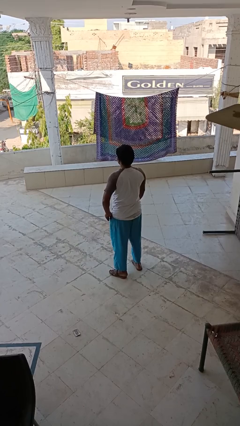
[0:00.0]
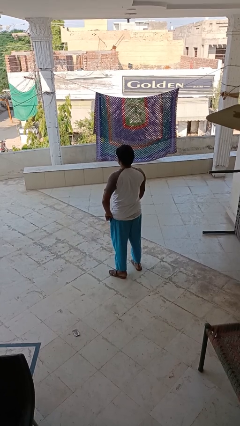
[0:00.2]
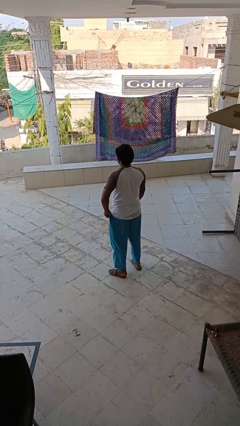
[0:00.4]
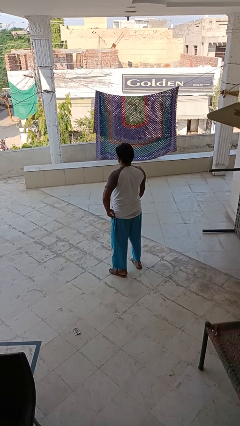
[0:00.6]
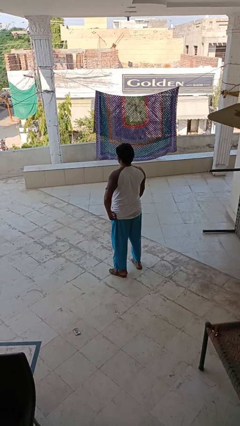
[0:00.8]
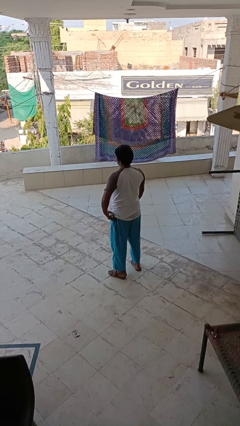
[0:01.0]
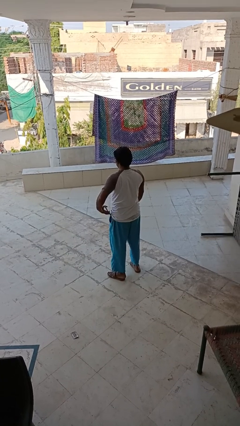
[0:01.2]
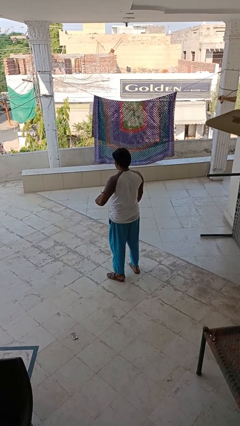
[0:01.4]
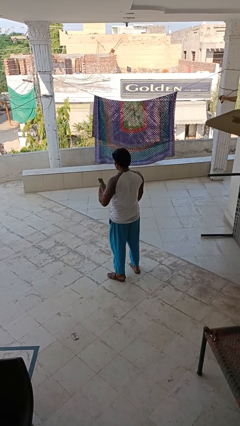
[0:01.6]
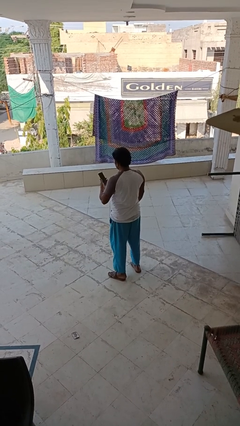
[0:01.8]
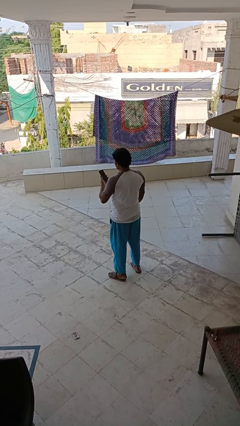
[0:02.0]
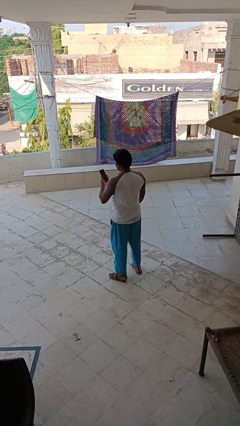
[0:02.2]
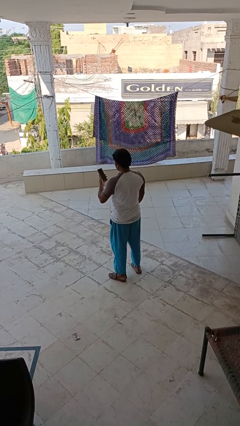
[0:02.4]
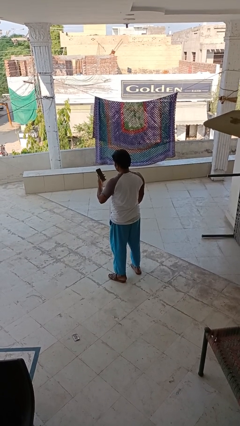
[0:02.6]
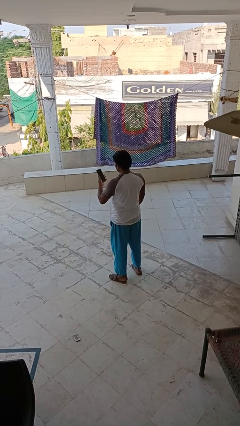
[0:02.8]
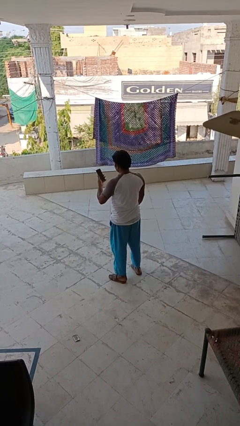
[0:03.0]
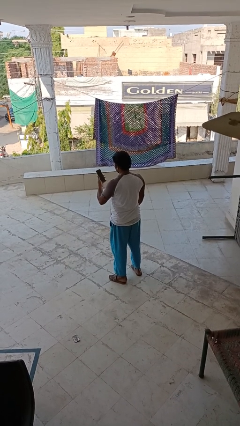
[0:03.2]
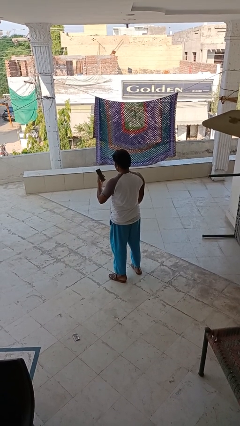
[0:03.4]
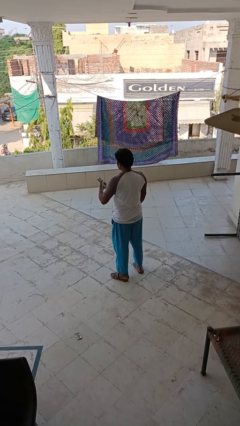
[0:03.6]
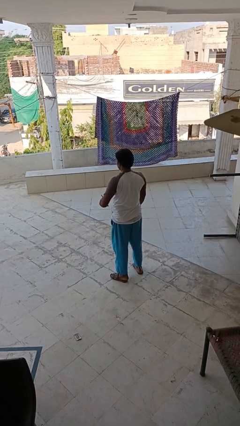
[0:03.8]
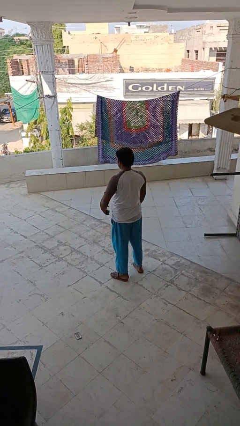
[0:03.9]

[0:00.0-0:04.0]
person takes phone from pocket

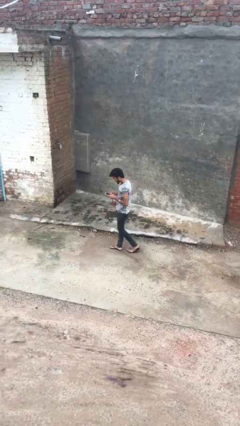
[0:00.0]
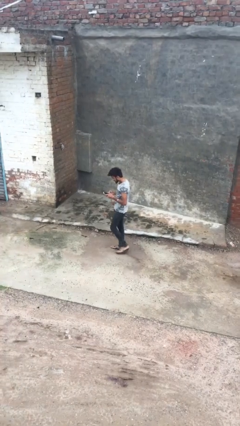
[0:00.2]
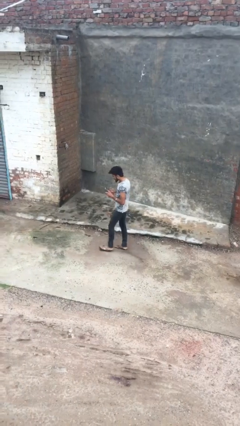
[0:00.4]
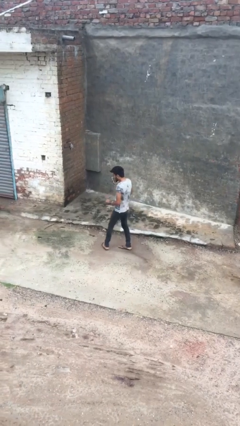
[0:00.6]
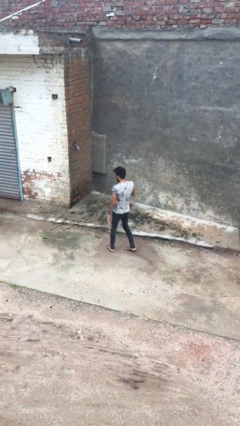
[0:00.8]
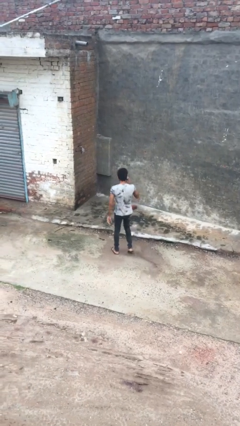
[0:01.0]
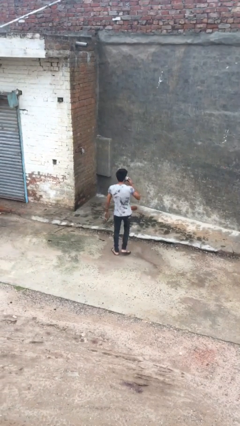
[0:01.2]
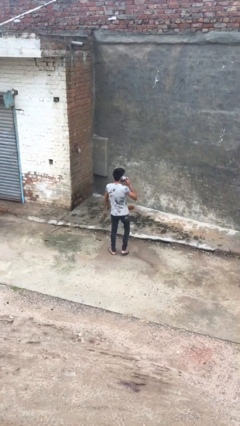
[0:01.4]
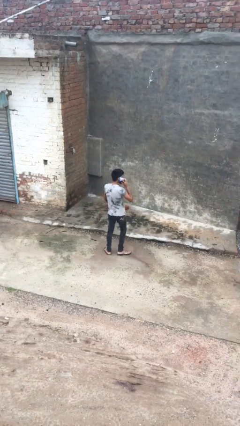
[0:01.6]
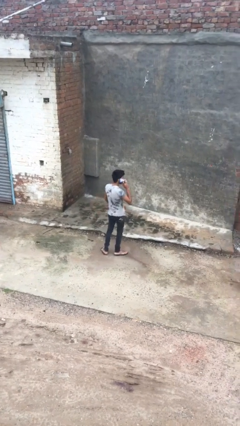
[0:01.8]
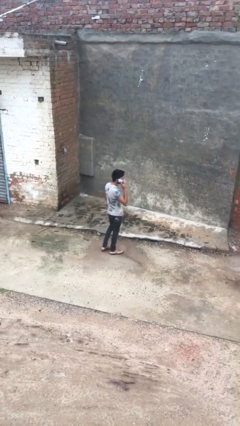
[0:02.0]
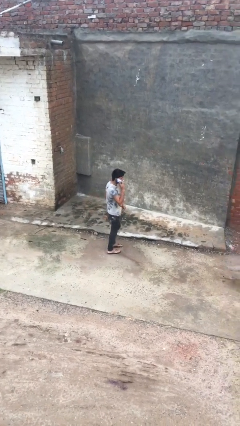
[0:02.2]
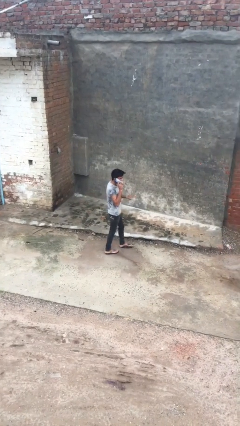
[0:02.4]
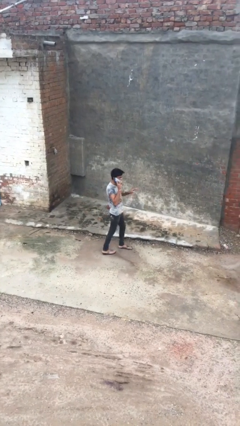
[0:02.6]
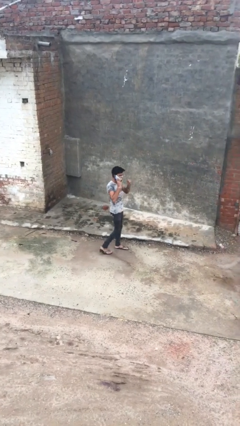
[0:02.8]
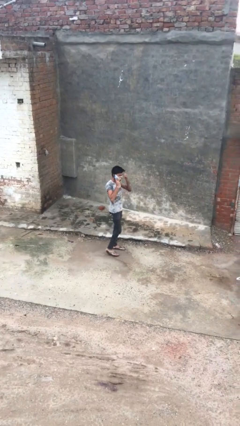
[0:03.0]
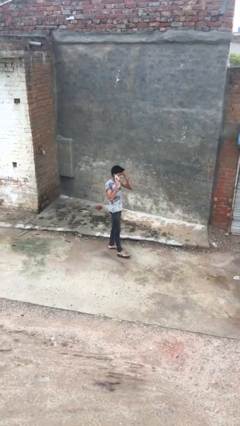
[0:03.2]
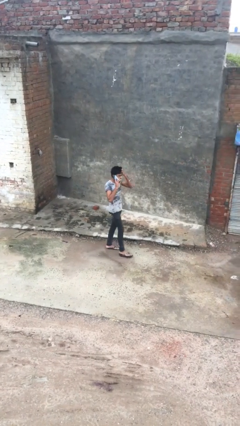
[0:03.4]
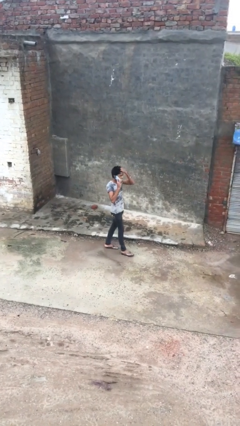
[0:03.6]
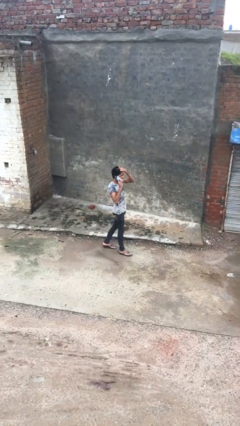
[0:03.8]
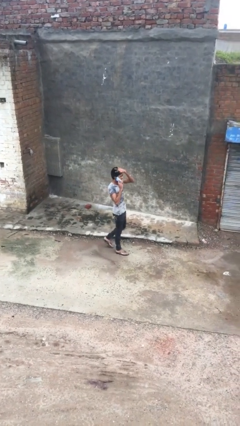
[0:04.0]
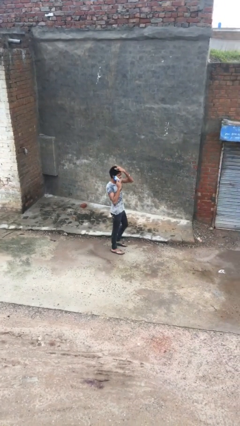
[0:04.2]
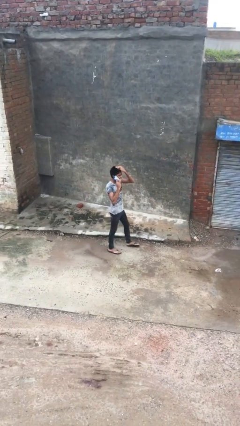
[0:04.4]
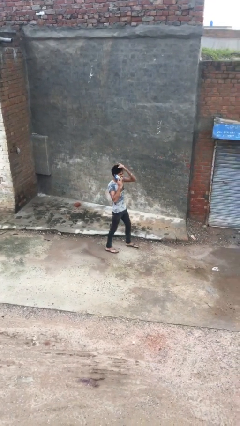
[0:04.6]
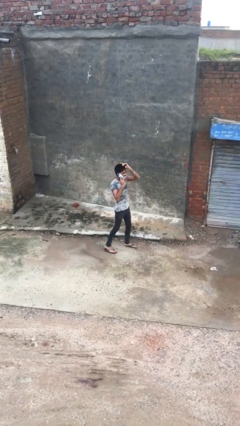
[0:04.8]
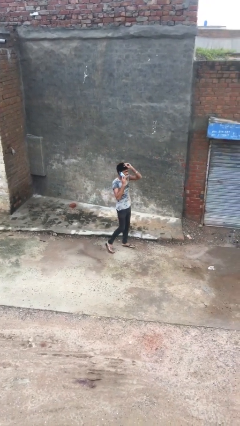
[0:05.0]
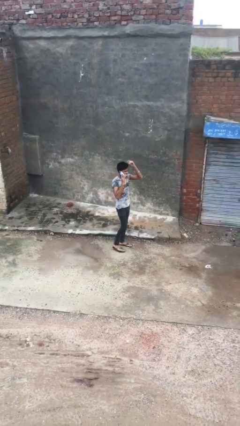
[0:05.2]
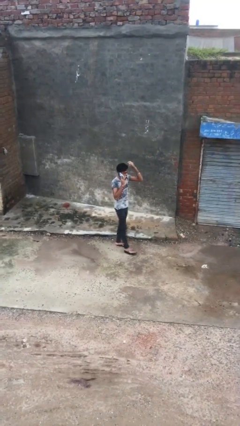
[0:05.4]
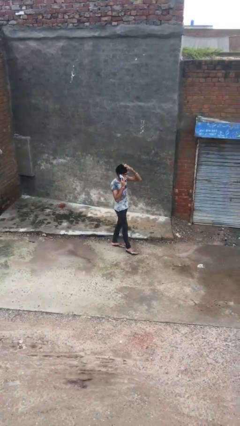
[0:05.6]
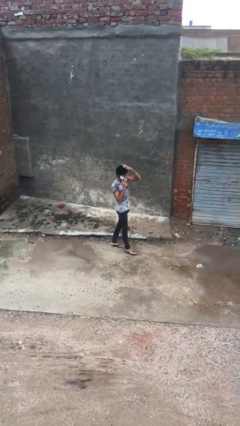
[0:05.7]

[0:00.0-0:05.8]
person talks on phone

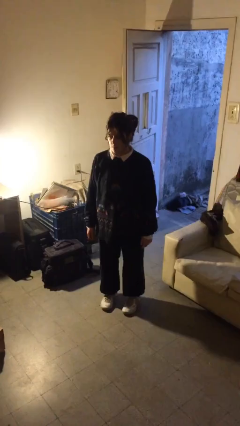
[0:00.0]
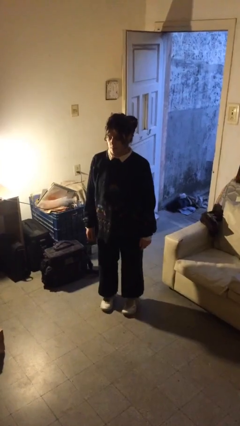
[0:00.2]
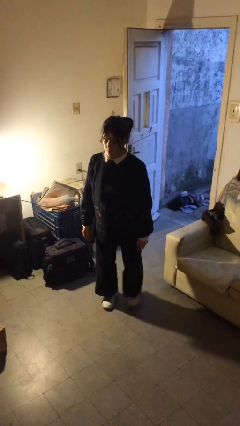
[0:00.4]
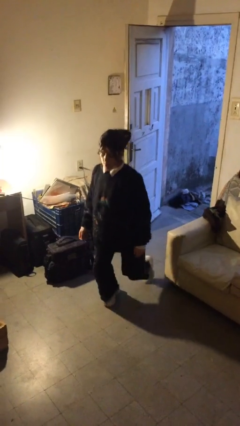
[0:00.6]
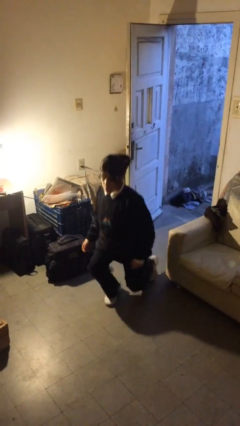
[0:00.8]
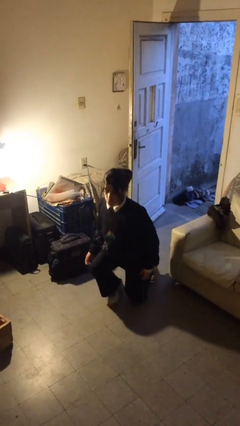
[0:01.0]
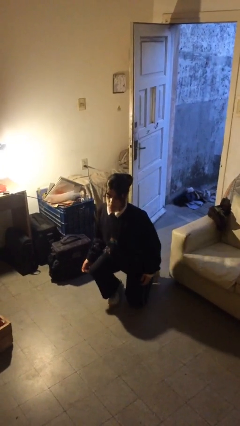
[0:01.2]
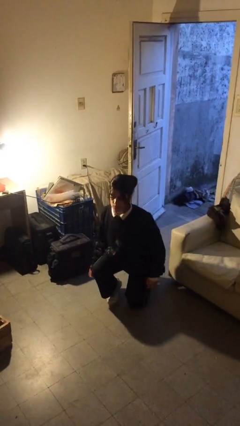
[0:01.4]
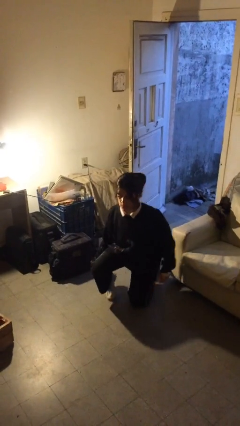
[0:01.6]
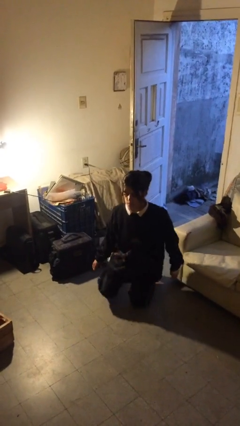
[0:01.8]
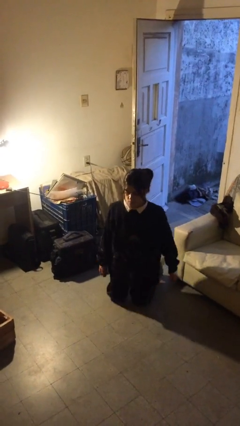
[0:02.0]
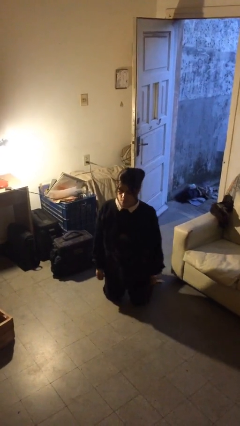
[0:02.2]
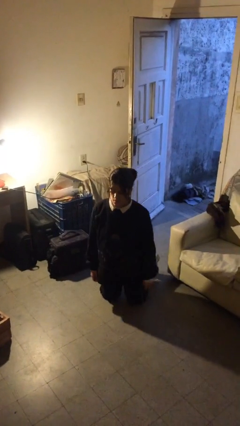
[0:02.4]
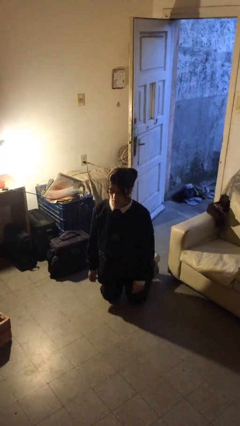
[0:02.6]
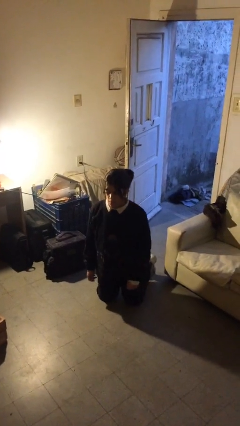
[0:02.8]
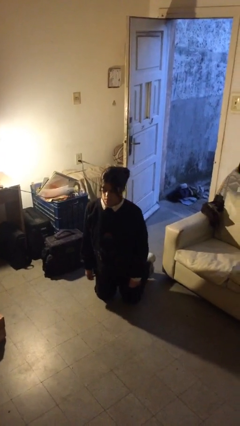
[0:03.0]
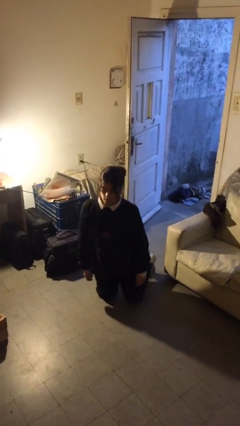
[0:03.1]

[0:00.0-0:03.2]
person kneels

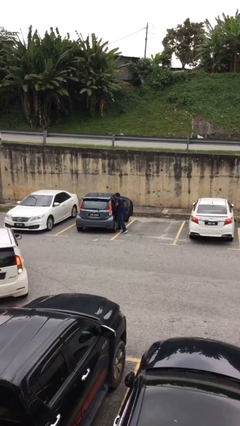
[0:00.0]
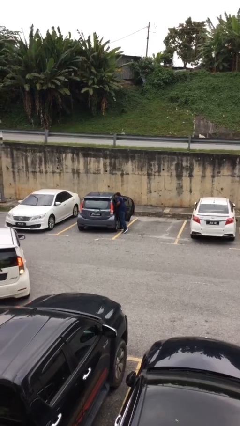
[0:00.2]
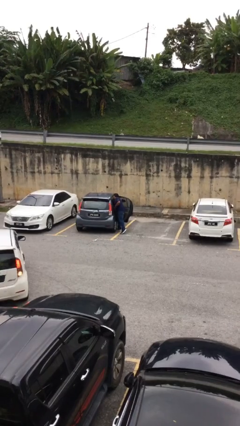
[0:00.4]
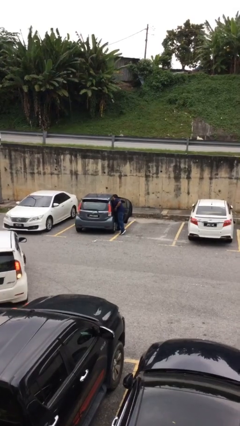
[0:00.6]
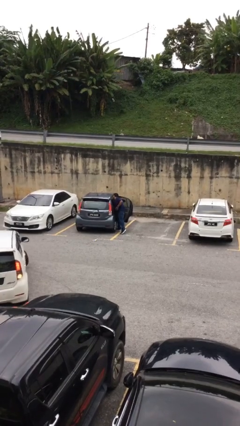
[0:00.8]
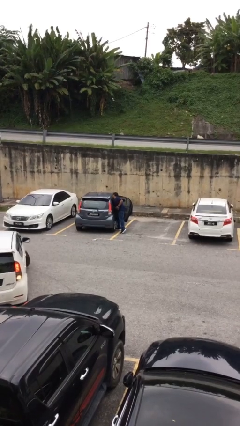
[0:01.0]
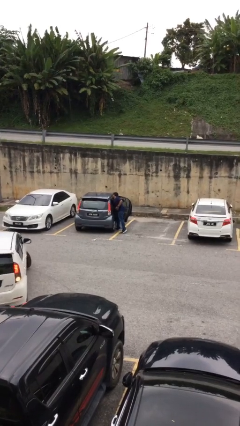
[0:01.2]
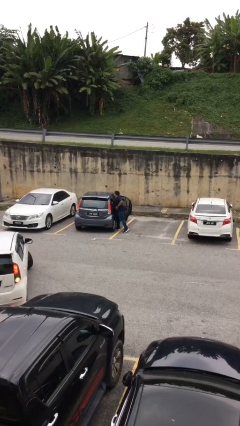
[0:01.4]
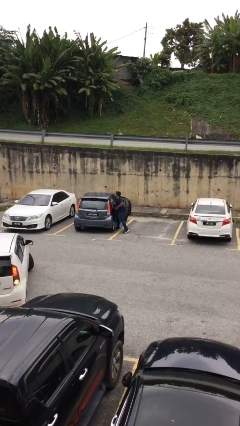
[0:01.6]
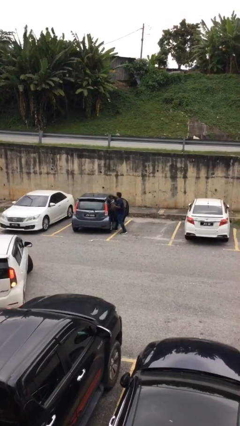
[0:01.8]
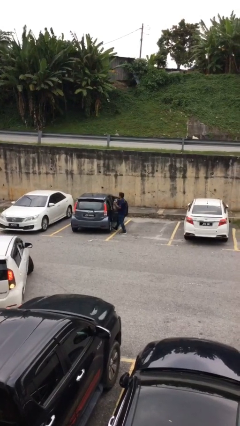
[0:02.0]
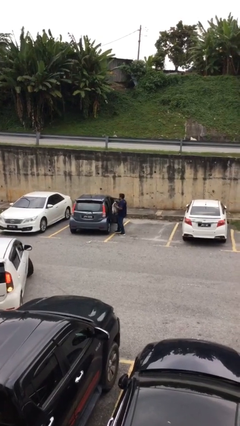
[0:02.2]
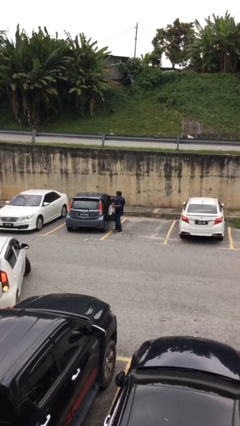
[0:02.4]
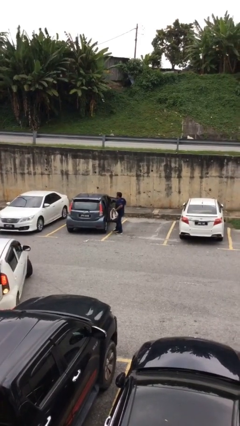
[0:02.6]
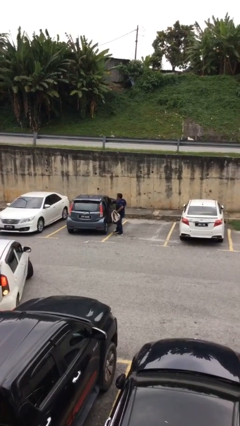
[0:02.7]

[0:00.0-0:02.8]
person unloads car

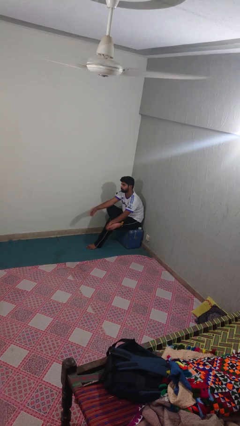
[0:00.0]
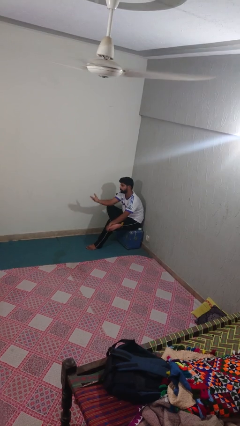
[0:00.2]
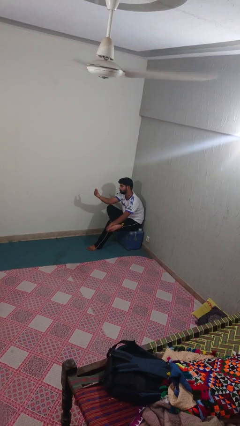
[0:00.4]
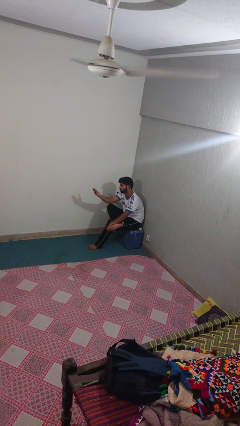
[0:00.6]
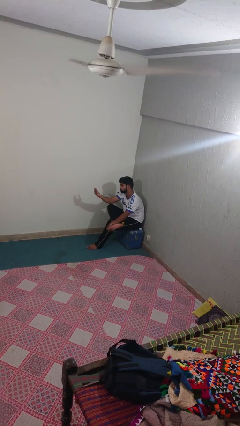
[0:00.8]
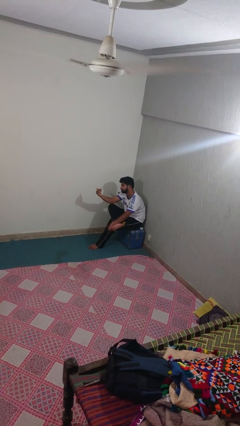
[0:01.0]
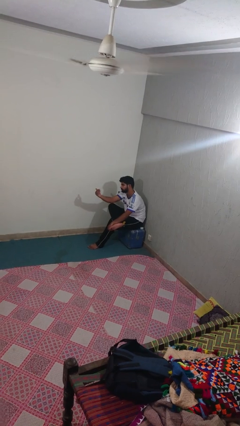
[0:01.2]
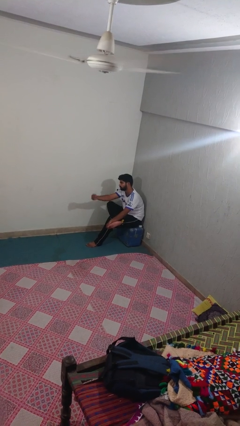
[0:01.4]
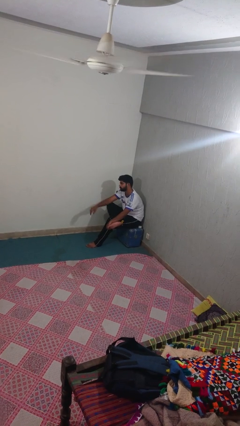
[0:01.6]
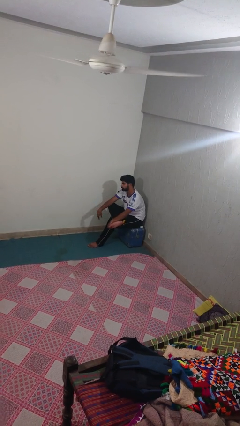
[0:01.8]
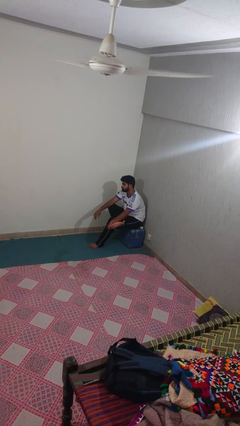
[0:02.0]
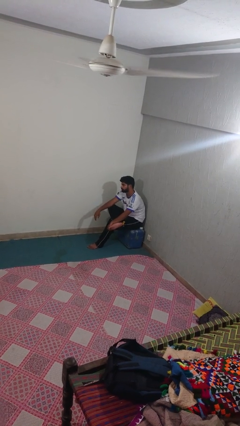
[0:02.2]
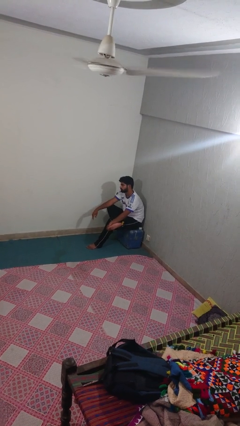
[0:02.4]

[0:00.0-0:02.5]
person gestures come here
